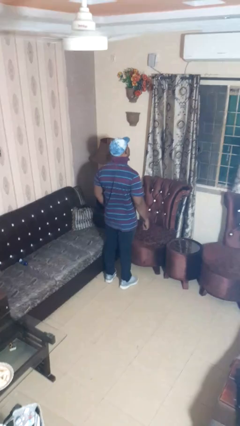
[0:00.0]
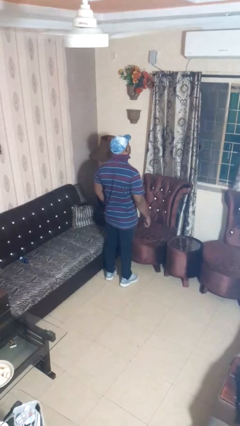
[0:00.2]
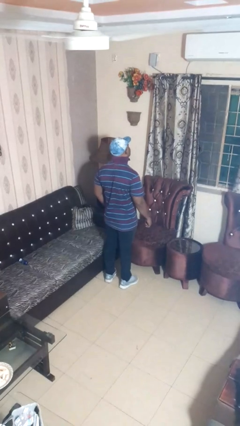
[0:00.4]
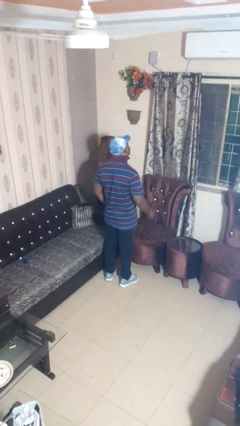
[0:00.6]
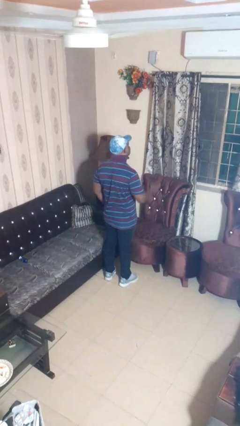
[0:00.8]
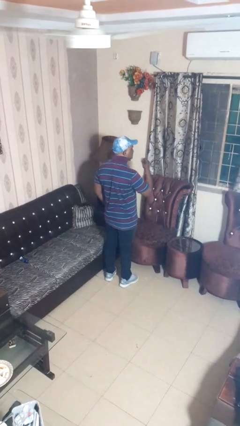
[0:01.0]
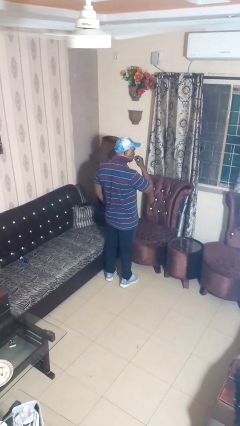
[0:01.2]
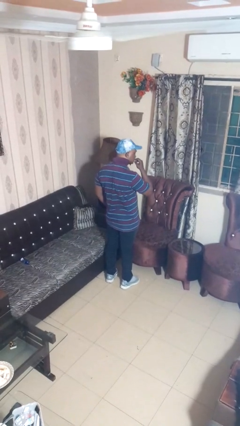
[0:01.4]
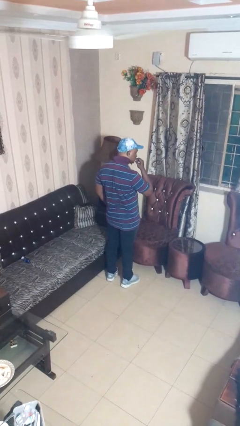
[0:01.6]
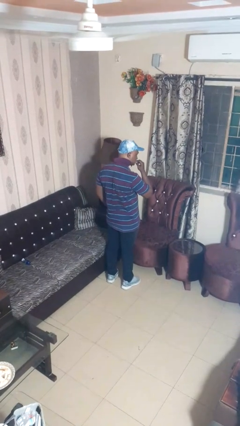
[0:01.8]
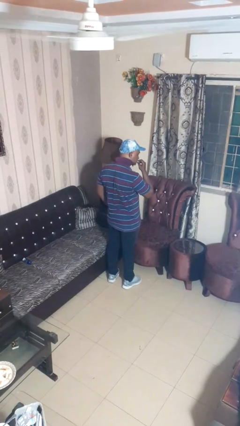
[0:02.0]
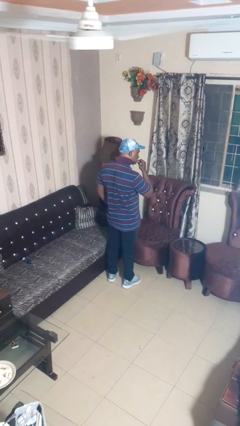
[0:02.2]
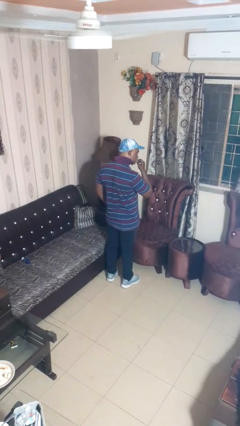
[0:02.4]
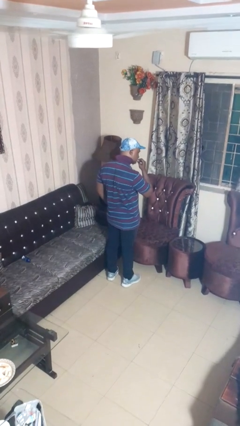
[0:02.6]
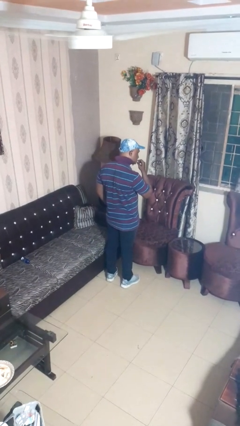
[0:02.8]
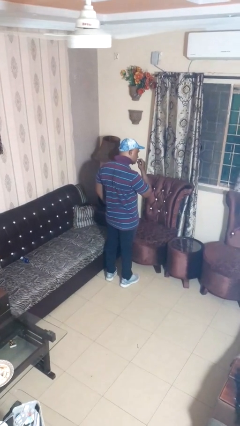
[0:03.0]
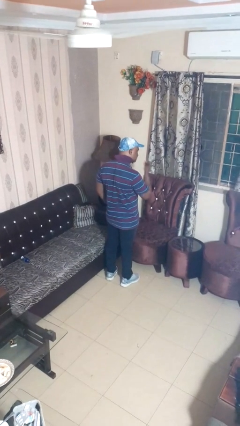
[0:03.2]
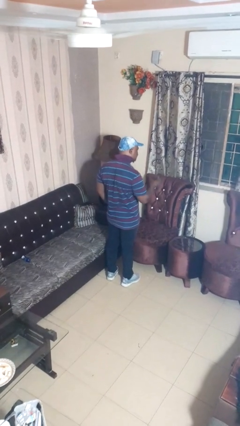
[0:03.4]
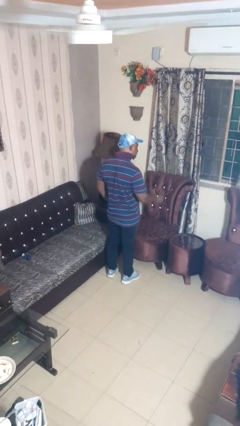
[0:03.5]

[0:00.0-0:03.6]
person flosses

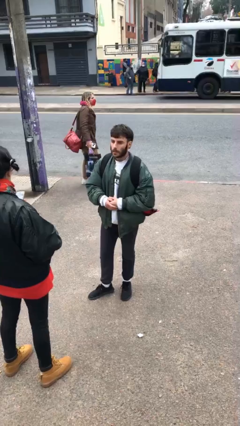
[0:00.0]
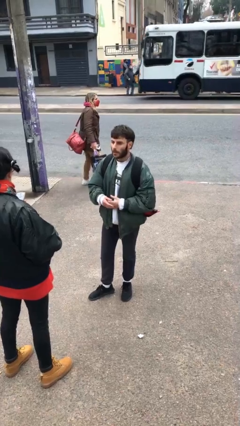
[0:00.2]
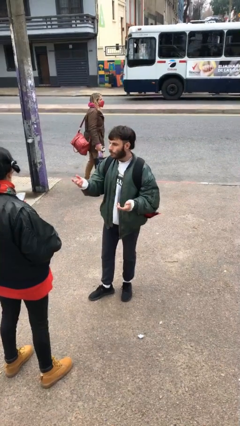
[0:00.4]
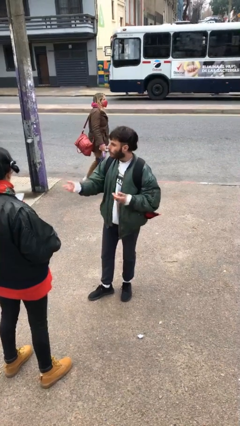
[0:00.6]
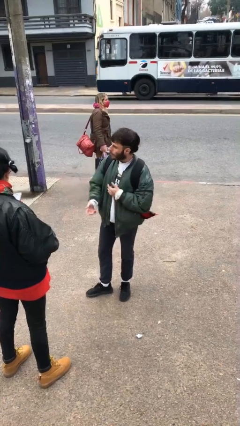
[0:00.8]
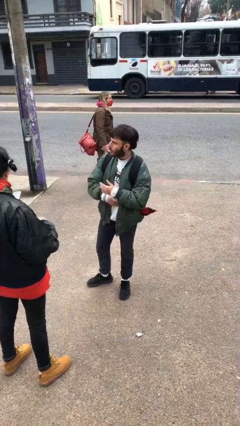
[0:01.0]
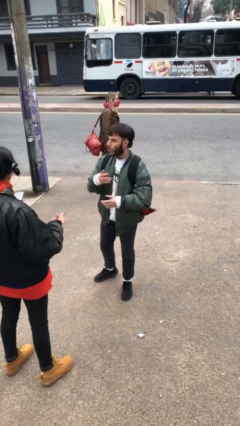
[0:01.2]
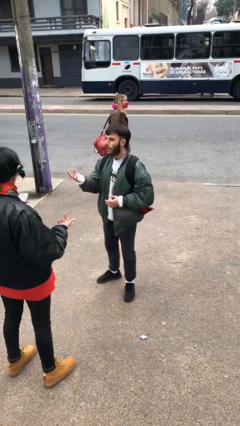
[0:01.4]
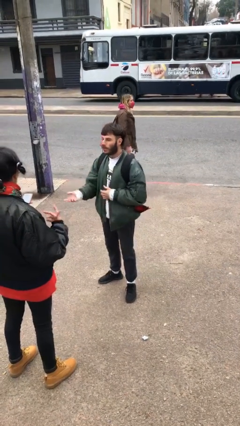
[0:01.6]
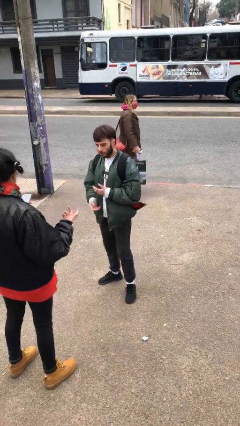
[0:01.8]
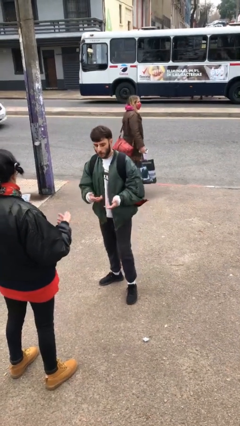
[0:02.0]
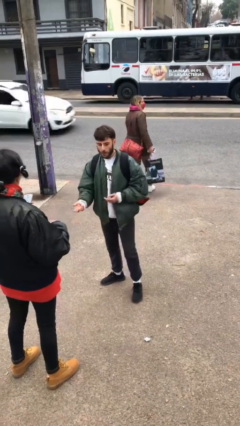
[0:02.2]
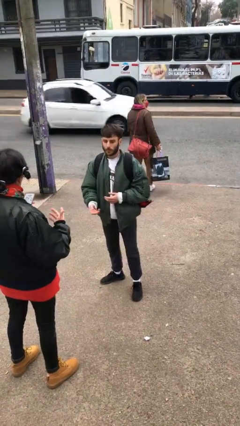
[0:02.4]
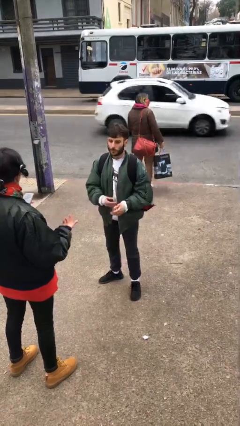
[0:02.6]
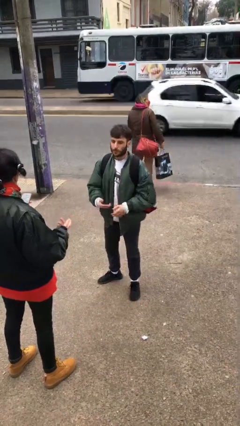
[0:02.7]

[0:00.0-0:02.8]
person talks to person

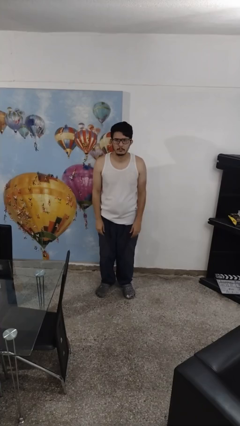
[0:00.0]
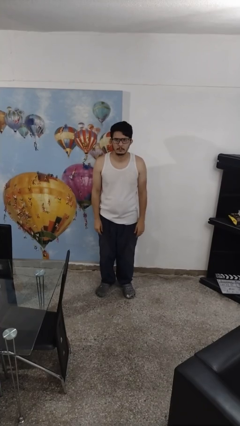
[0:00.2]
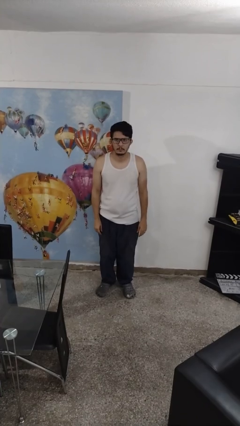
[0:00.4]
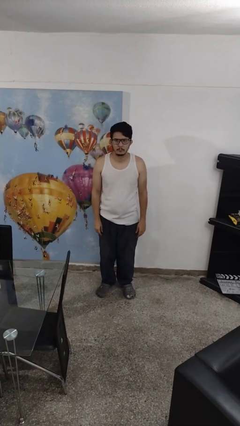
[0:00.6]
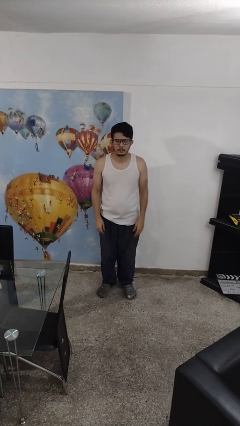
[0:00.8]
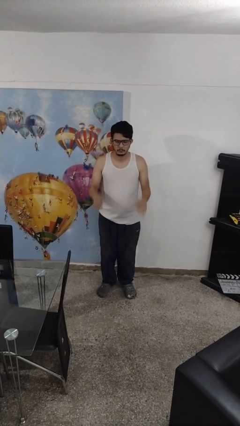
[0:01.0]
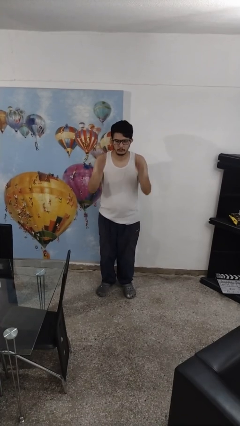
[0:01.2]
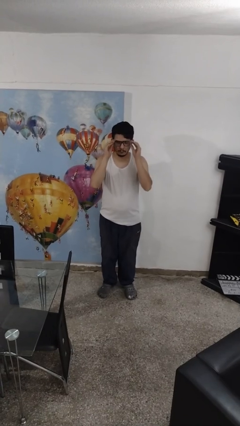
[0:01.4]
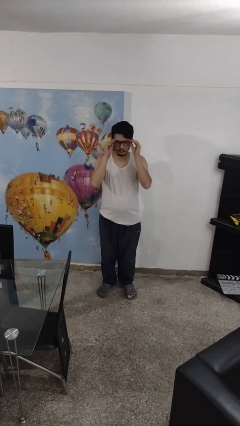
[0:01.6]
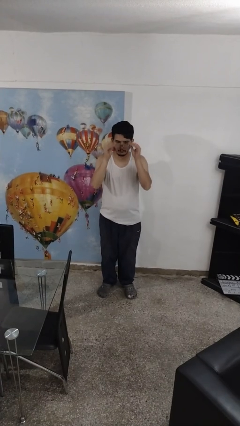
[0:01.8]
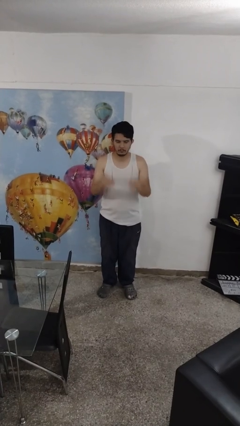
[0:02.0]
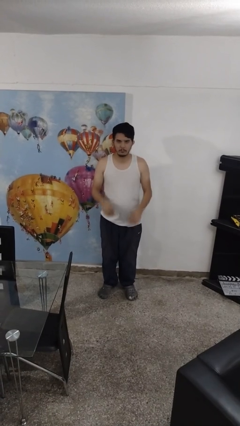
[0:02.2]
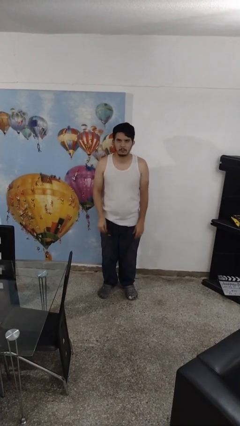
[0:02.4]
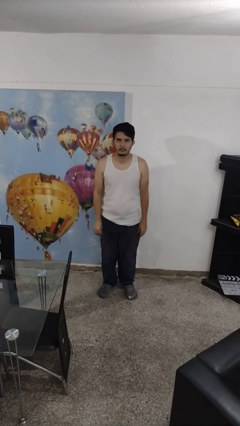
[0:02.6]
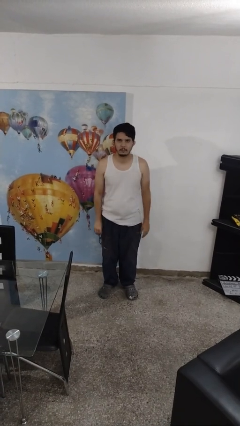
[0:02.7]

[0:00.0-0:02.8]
person takes off glasses

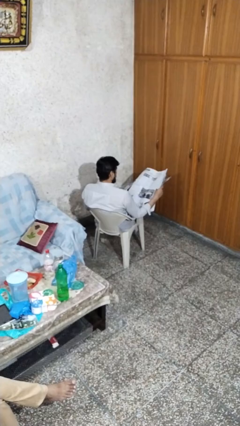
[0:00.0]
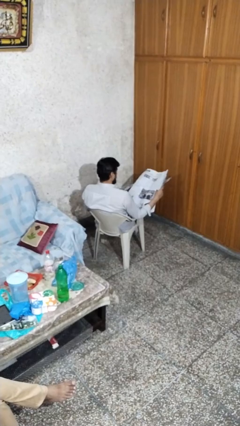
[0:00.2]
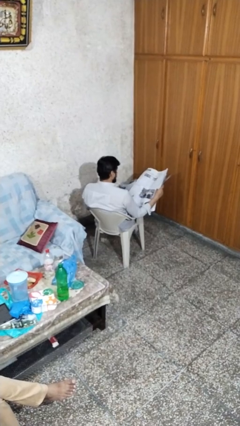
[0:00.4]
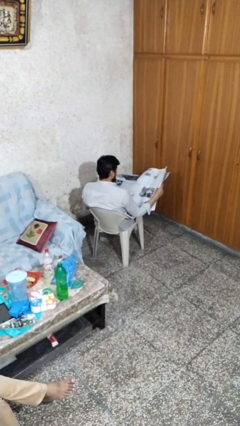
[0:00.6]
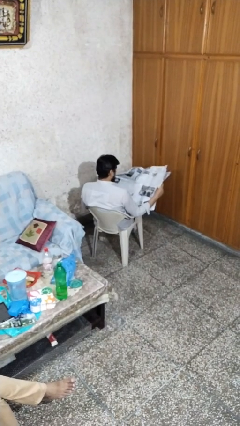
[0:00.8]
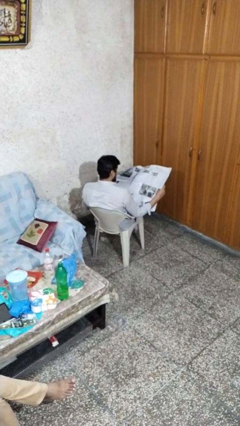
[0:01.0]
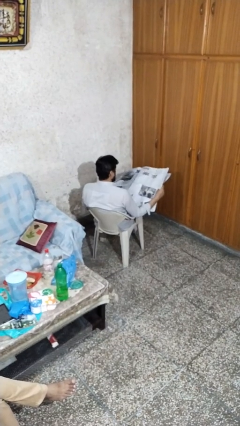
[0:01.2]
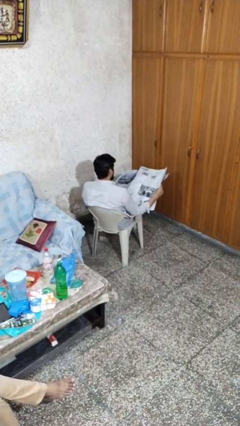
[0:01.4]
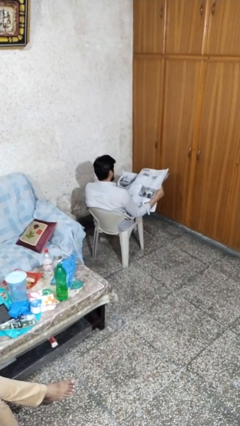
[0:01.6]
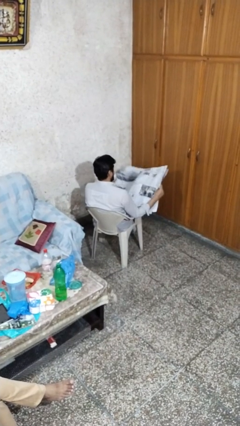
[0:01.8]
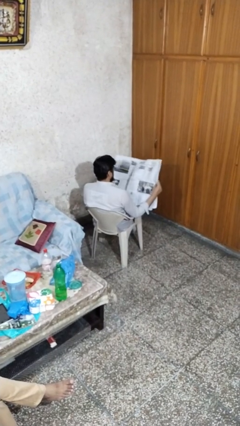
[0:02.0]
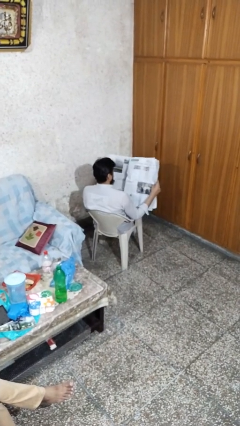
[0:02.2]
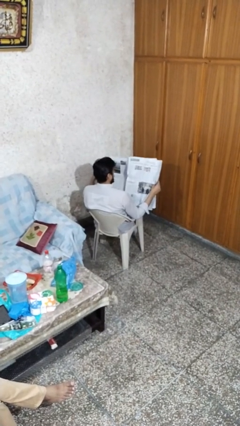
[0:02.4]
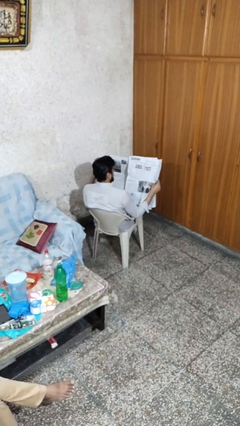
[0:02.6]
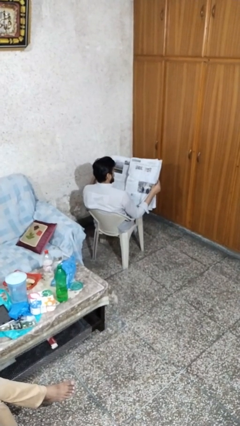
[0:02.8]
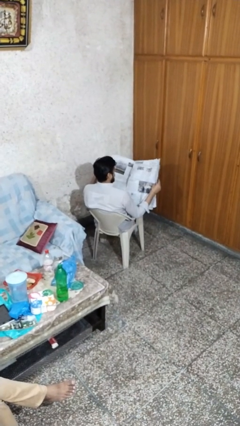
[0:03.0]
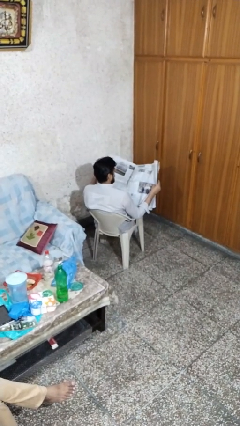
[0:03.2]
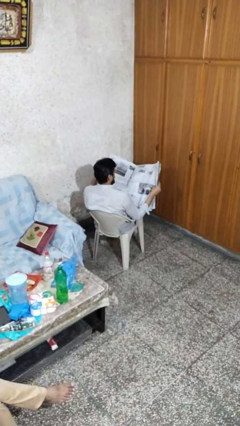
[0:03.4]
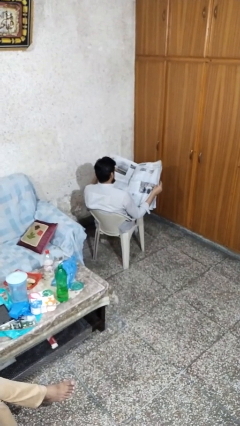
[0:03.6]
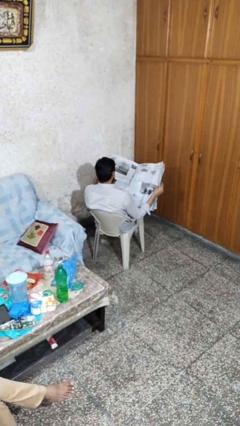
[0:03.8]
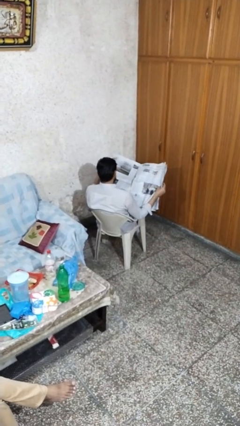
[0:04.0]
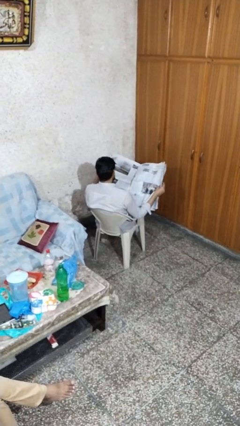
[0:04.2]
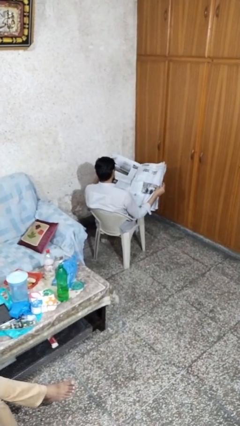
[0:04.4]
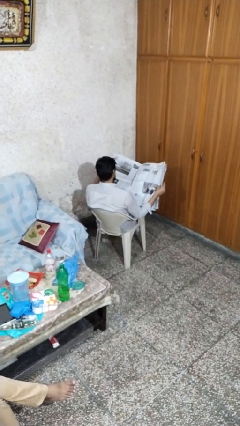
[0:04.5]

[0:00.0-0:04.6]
person reads newspaper

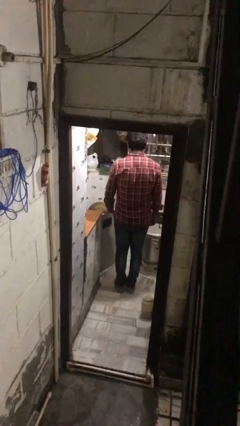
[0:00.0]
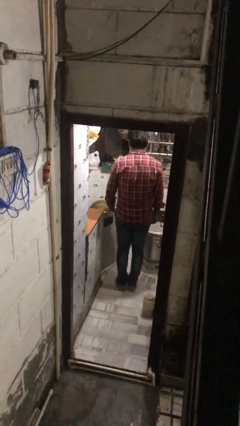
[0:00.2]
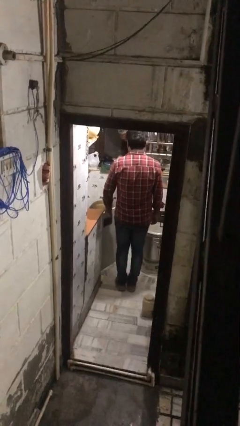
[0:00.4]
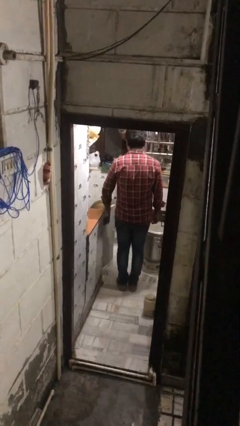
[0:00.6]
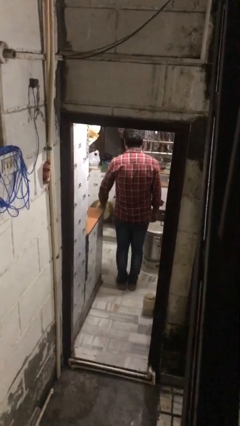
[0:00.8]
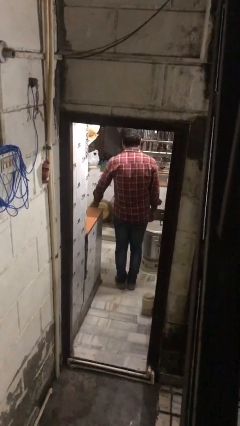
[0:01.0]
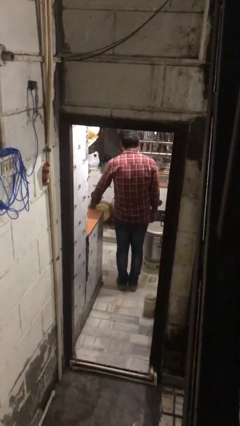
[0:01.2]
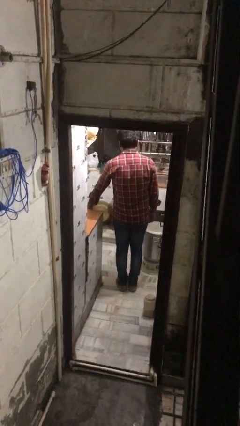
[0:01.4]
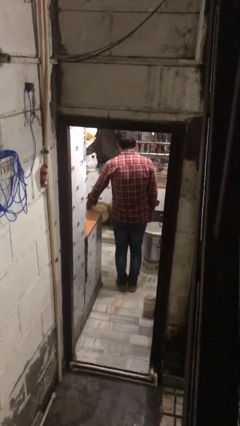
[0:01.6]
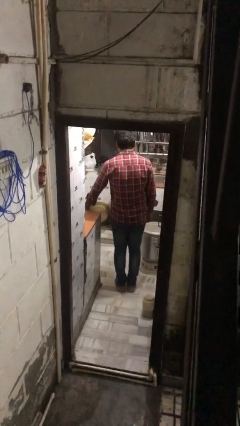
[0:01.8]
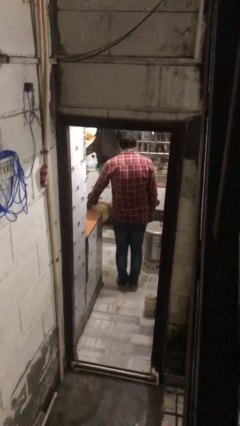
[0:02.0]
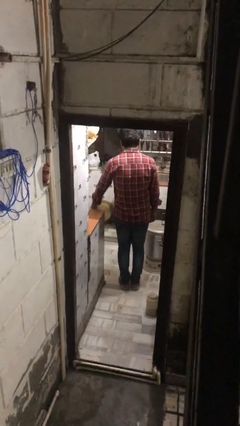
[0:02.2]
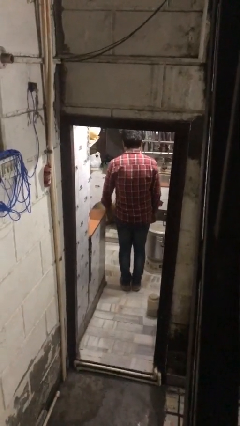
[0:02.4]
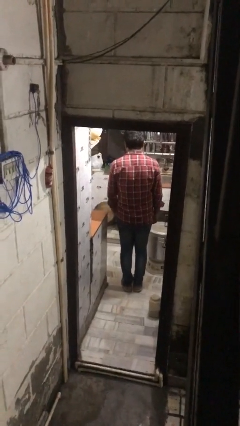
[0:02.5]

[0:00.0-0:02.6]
person closes kitchen drawer

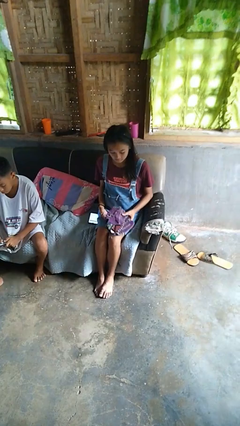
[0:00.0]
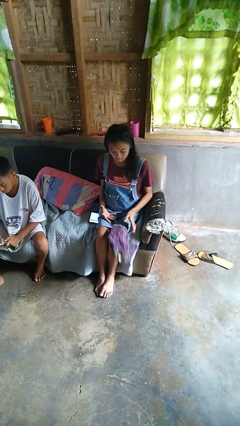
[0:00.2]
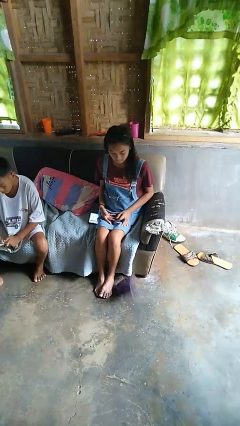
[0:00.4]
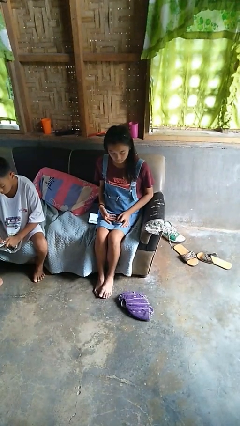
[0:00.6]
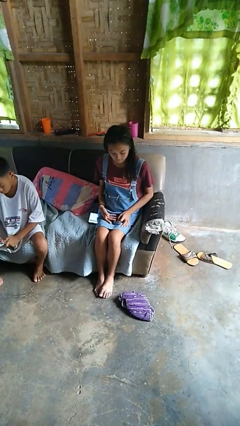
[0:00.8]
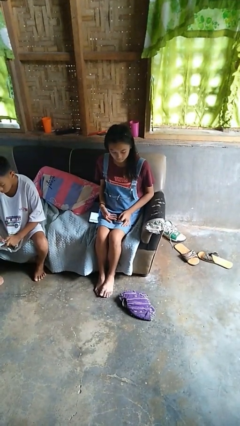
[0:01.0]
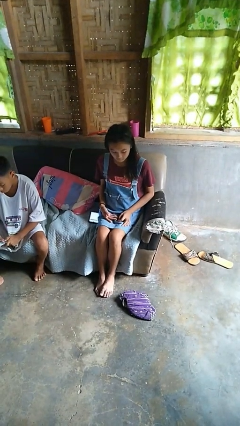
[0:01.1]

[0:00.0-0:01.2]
person drops object
